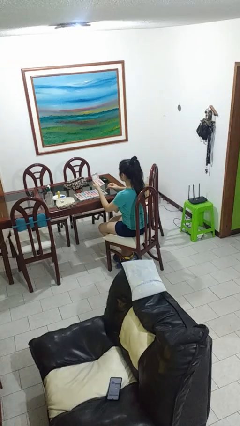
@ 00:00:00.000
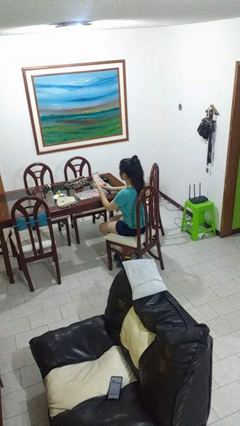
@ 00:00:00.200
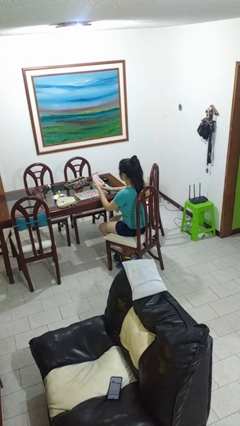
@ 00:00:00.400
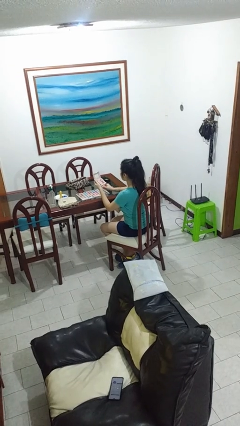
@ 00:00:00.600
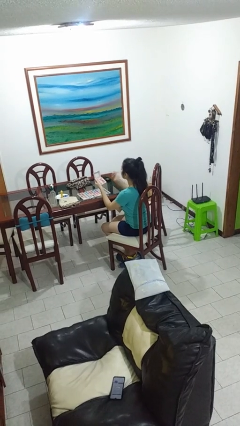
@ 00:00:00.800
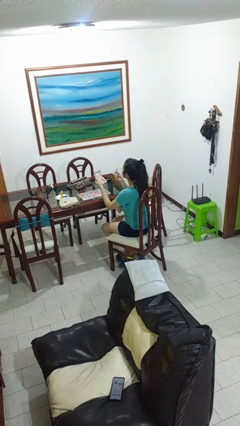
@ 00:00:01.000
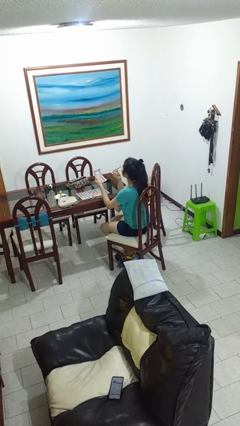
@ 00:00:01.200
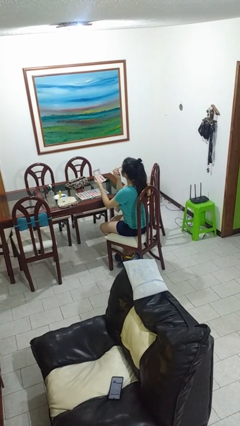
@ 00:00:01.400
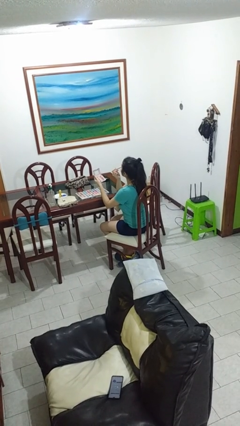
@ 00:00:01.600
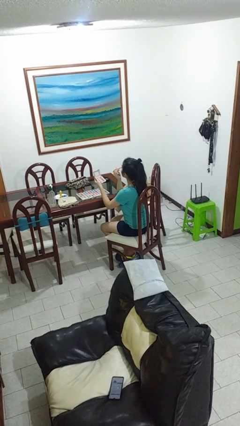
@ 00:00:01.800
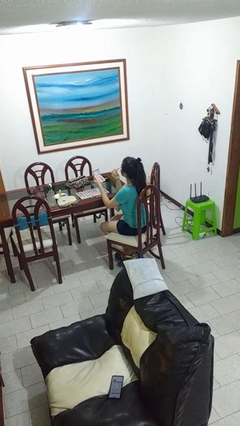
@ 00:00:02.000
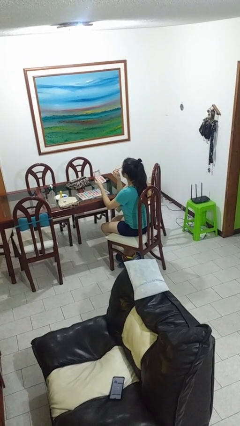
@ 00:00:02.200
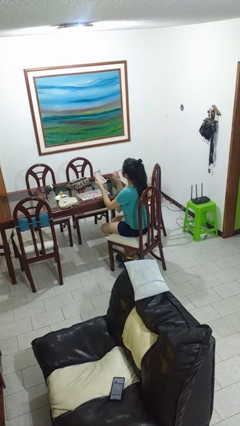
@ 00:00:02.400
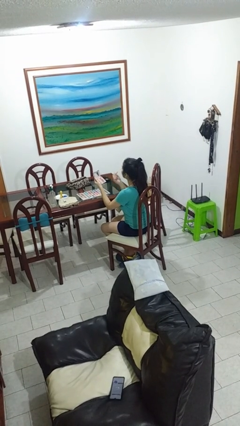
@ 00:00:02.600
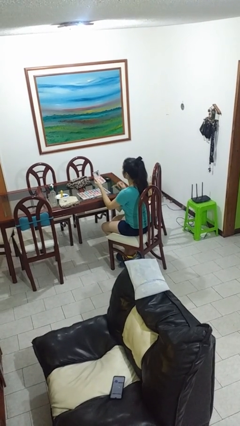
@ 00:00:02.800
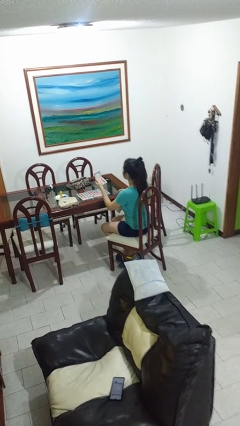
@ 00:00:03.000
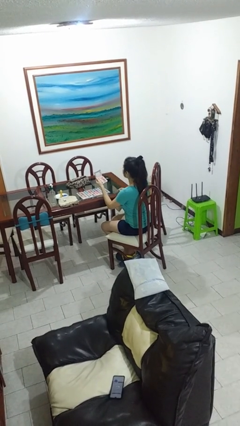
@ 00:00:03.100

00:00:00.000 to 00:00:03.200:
person applies eye makeup

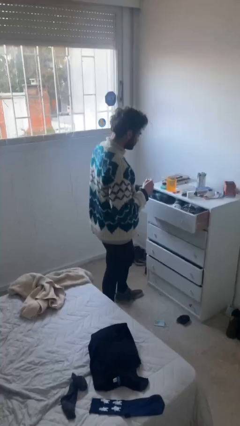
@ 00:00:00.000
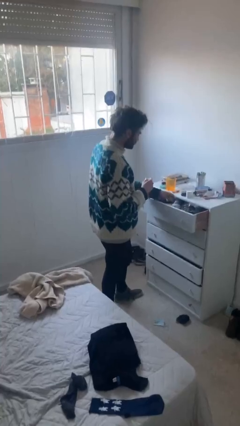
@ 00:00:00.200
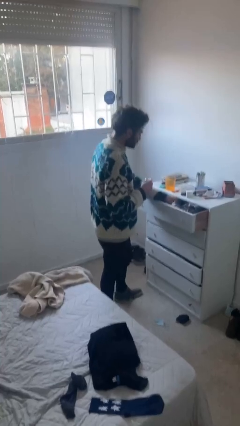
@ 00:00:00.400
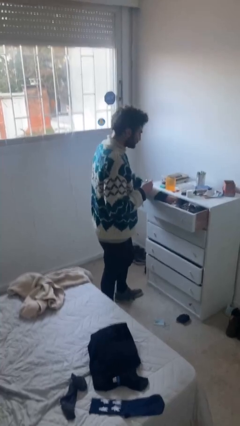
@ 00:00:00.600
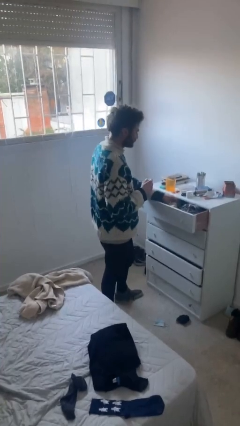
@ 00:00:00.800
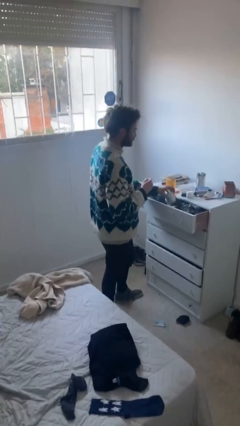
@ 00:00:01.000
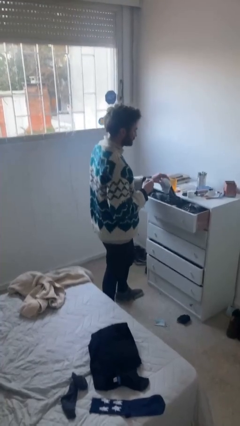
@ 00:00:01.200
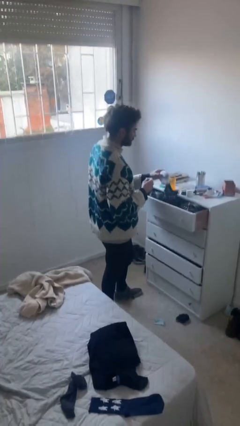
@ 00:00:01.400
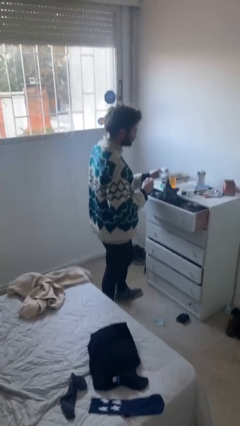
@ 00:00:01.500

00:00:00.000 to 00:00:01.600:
person takes clothes from dresser

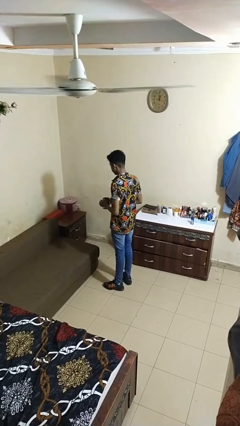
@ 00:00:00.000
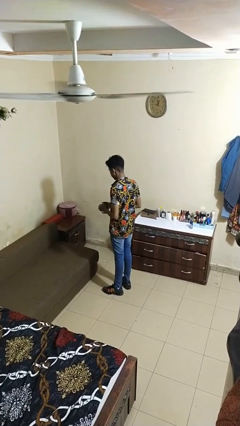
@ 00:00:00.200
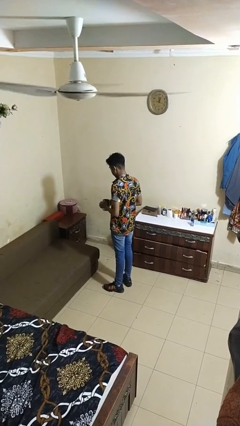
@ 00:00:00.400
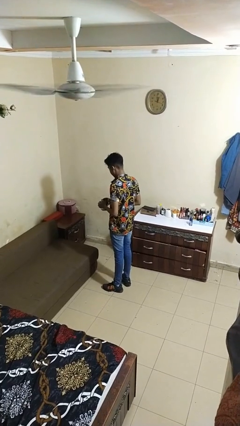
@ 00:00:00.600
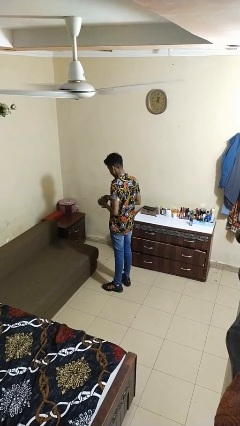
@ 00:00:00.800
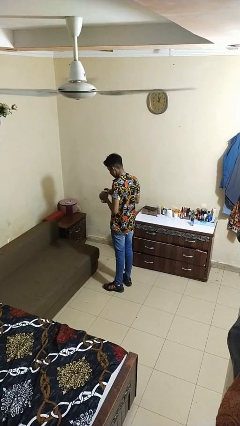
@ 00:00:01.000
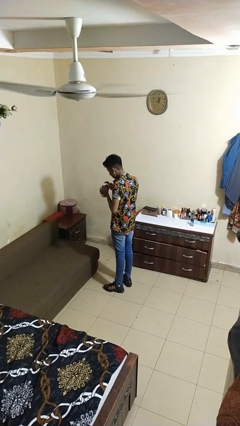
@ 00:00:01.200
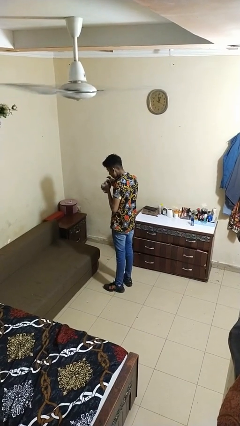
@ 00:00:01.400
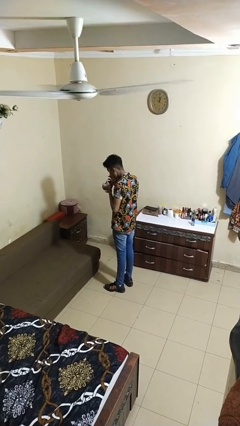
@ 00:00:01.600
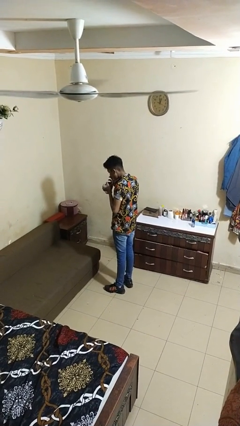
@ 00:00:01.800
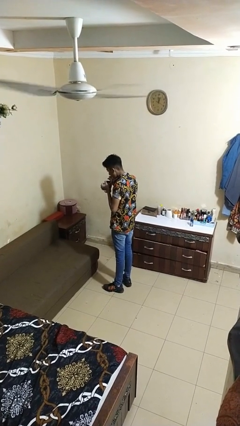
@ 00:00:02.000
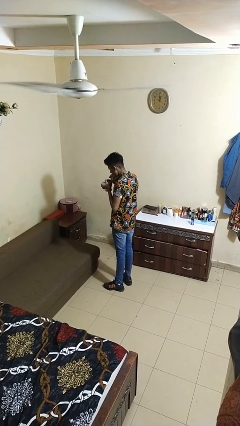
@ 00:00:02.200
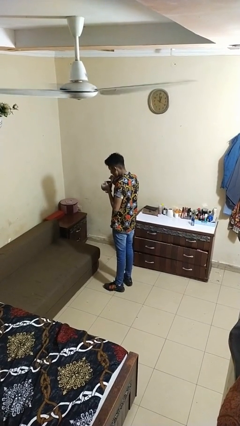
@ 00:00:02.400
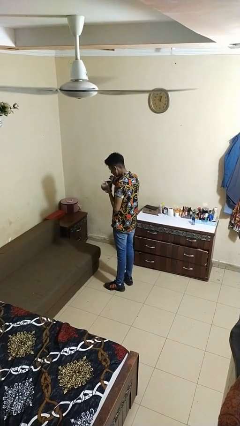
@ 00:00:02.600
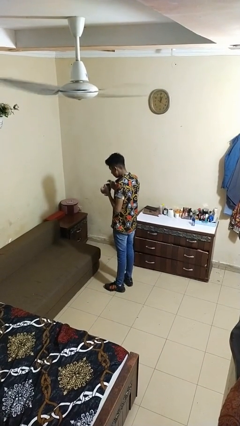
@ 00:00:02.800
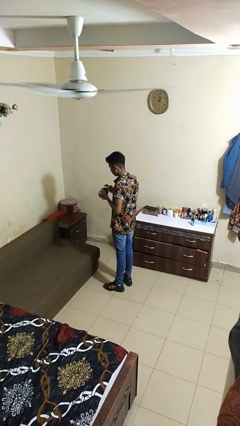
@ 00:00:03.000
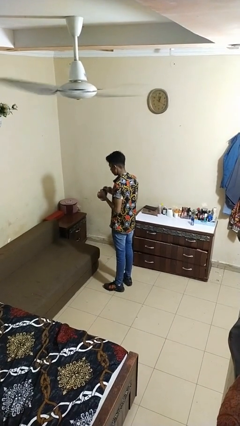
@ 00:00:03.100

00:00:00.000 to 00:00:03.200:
person drinks from straw

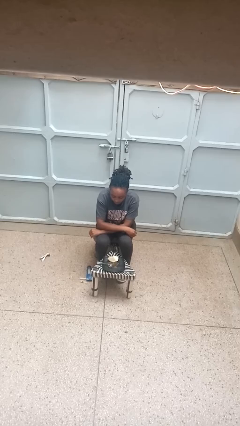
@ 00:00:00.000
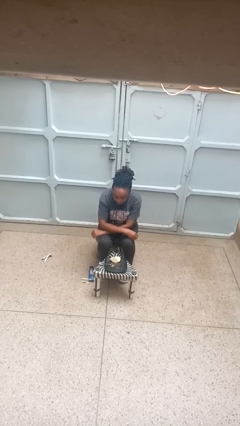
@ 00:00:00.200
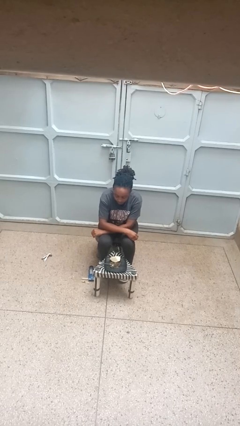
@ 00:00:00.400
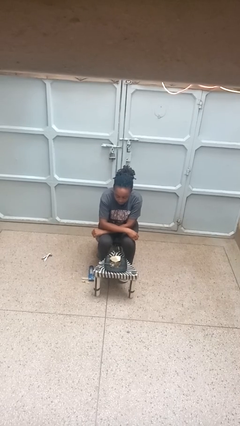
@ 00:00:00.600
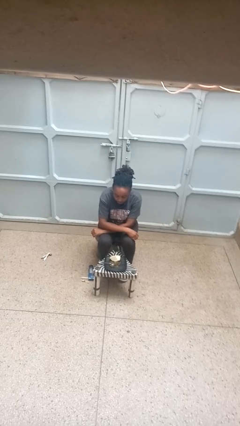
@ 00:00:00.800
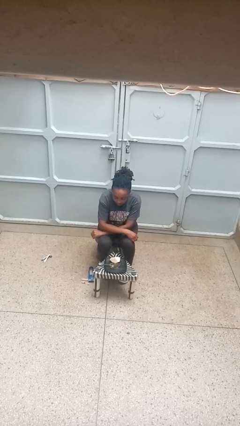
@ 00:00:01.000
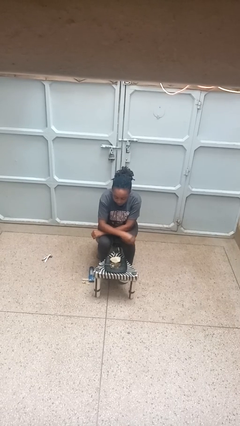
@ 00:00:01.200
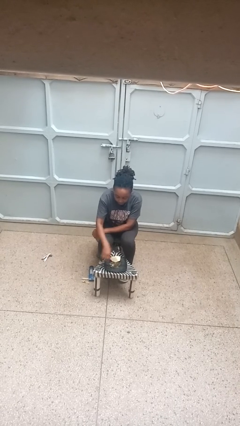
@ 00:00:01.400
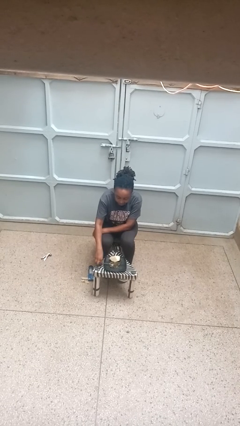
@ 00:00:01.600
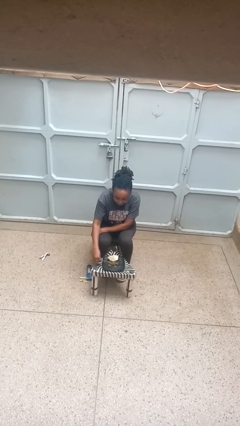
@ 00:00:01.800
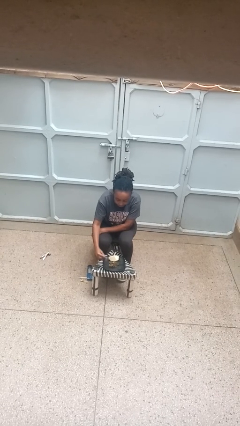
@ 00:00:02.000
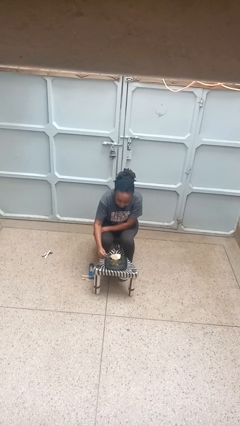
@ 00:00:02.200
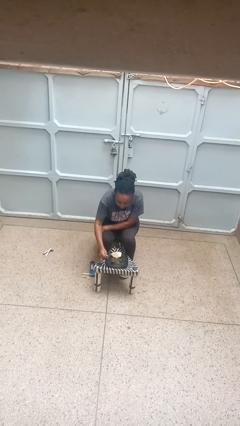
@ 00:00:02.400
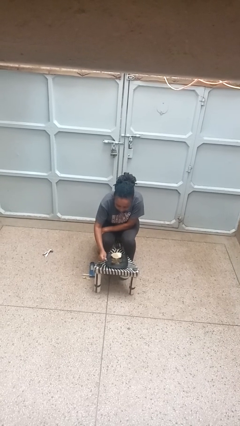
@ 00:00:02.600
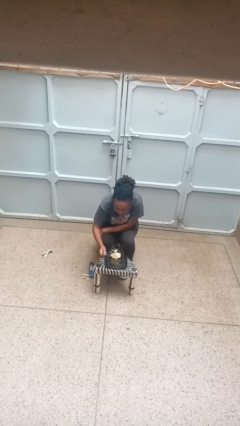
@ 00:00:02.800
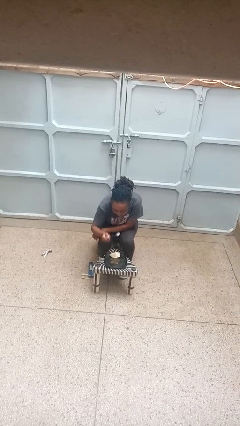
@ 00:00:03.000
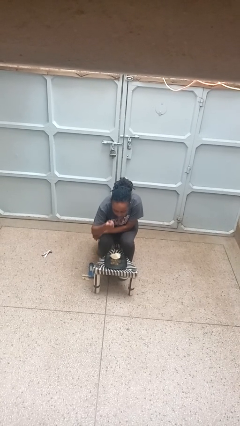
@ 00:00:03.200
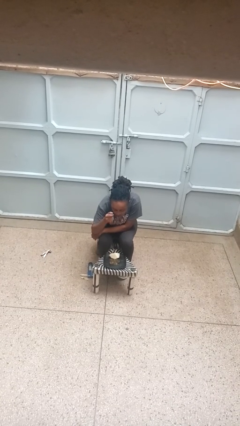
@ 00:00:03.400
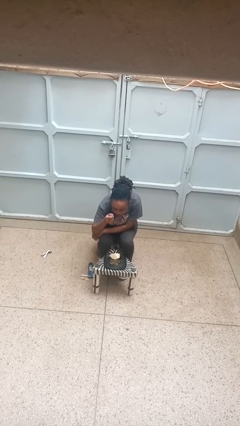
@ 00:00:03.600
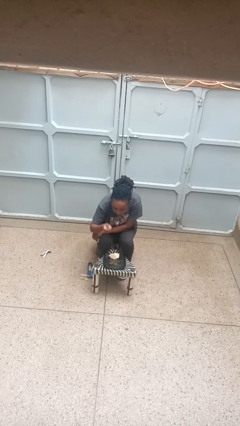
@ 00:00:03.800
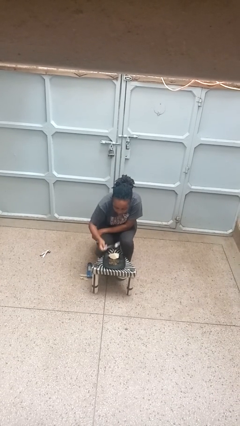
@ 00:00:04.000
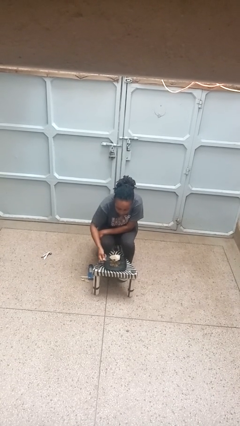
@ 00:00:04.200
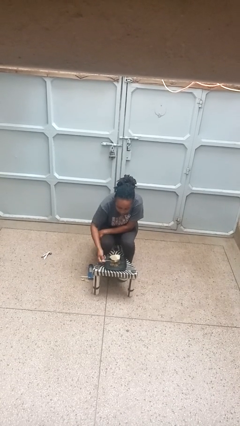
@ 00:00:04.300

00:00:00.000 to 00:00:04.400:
person eats with utensil

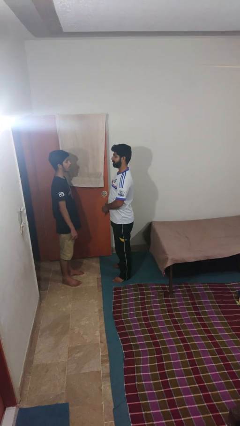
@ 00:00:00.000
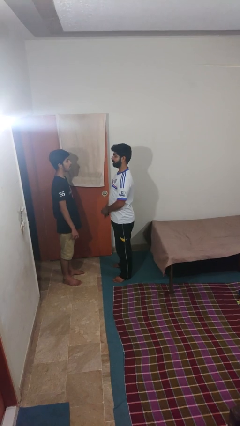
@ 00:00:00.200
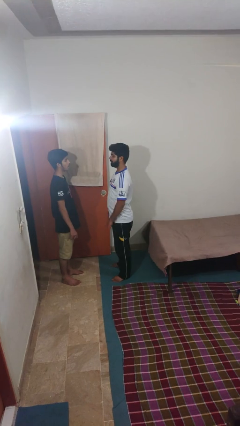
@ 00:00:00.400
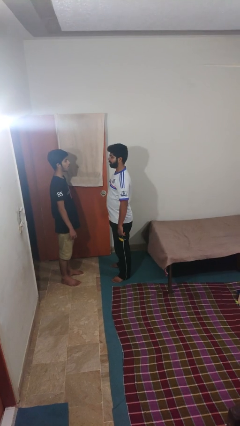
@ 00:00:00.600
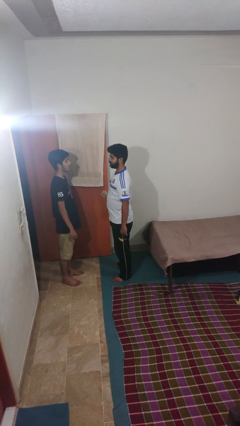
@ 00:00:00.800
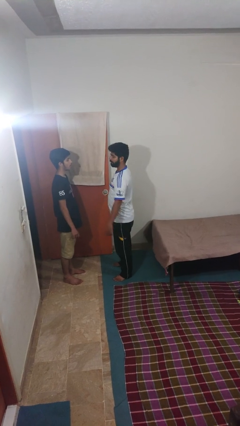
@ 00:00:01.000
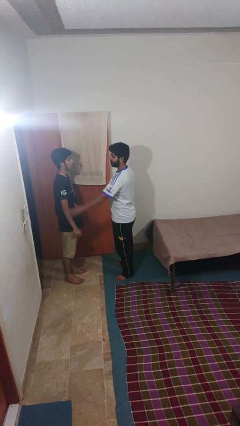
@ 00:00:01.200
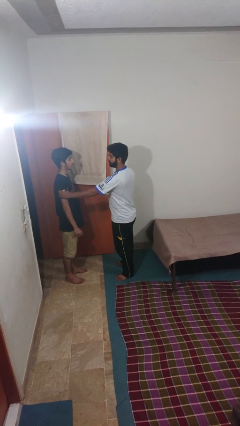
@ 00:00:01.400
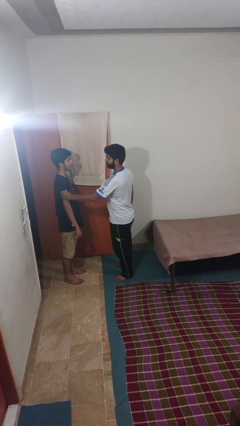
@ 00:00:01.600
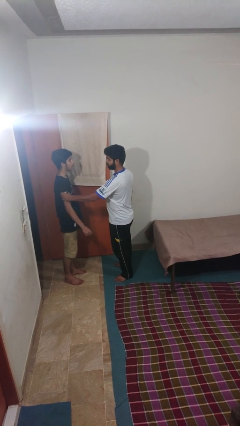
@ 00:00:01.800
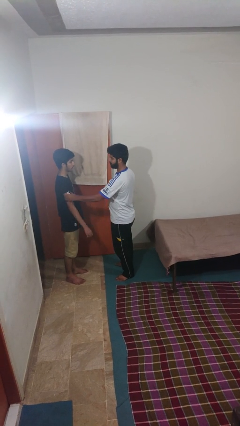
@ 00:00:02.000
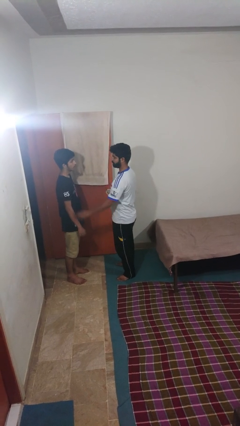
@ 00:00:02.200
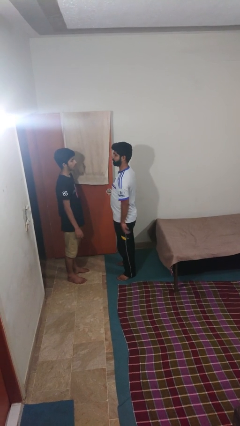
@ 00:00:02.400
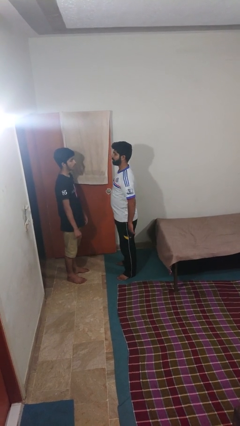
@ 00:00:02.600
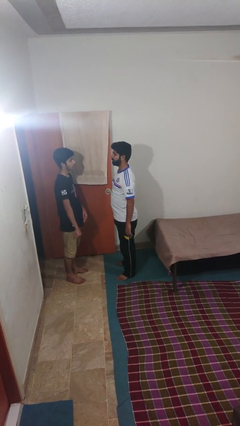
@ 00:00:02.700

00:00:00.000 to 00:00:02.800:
person grabs person by bicep

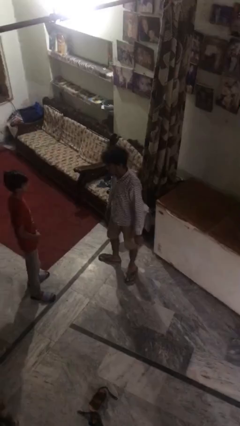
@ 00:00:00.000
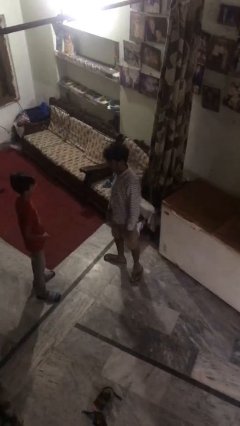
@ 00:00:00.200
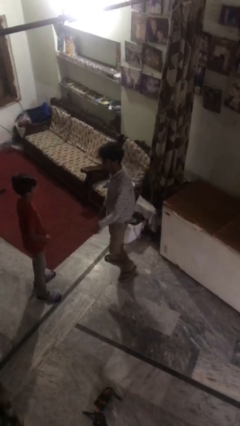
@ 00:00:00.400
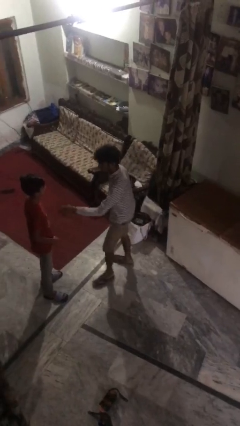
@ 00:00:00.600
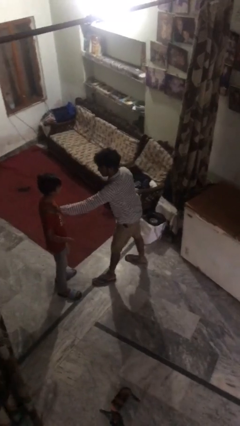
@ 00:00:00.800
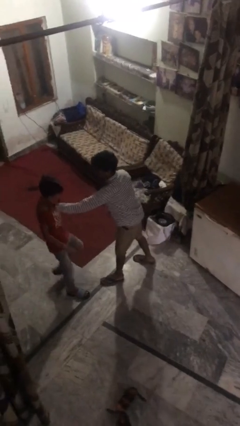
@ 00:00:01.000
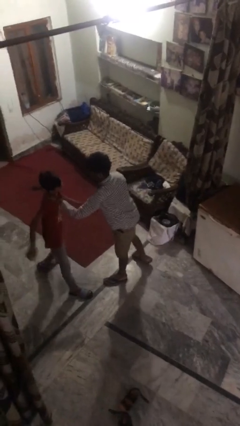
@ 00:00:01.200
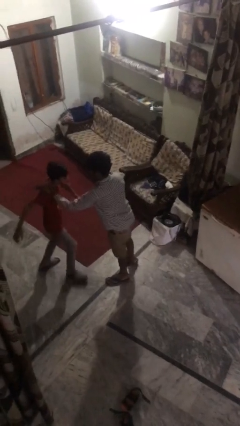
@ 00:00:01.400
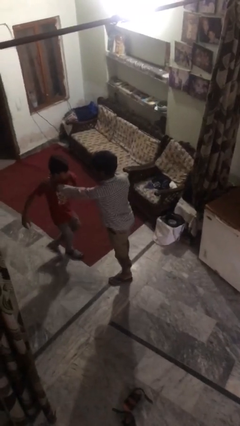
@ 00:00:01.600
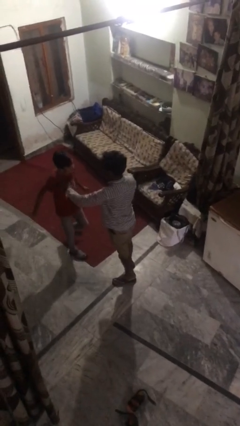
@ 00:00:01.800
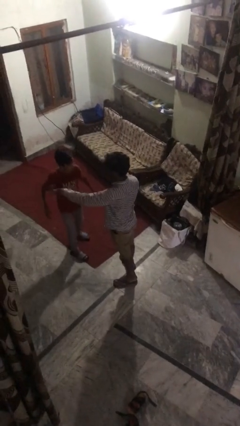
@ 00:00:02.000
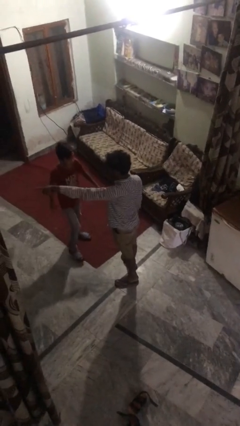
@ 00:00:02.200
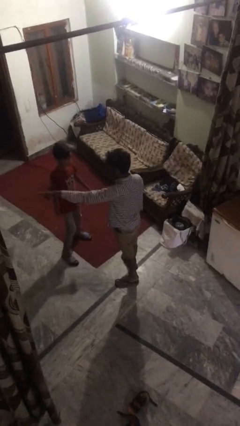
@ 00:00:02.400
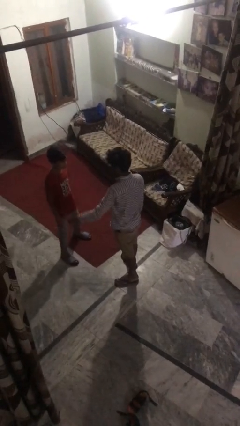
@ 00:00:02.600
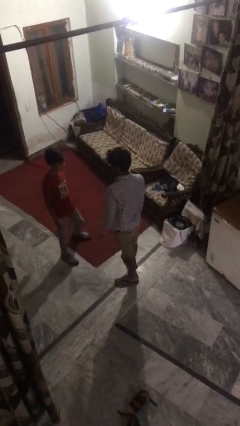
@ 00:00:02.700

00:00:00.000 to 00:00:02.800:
person shoves person
